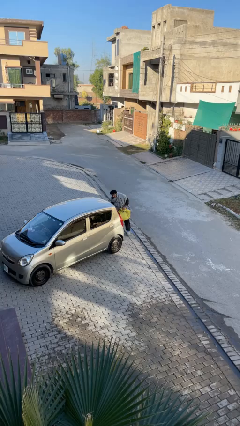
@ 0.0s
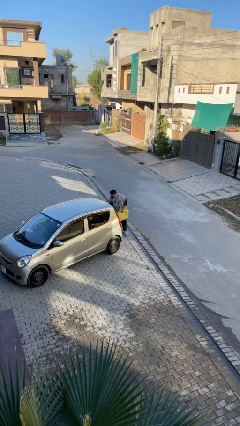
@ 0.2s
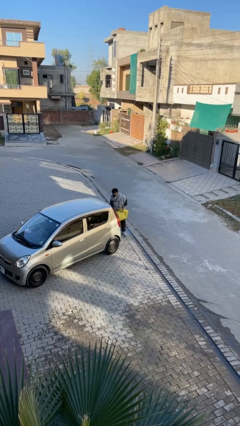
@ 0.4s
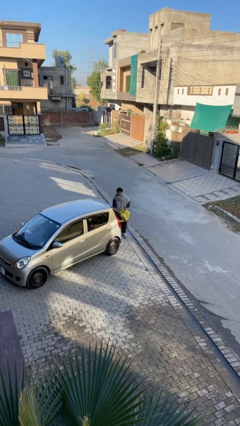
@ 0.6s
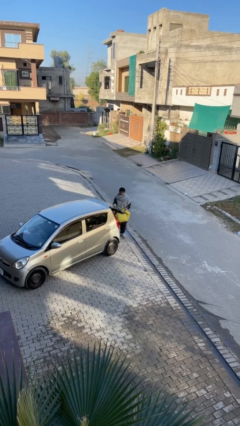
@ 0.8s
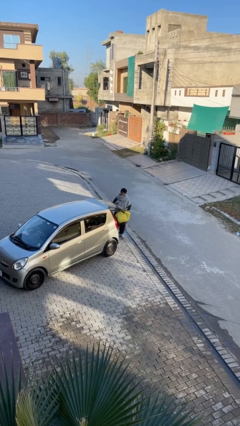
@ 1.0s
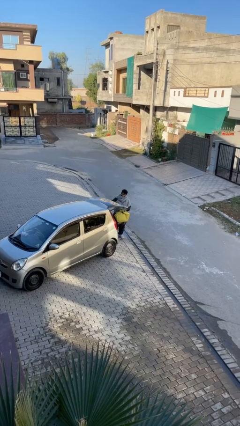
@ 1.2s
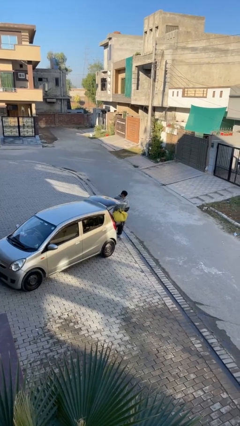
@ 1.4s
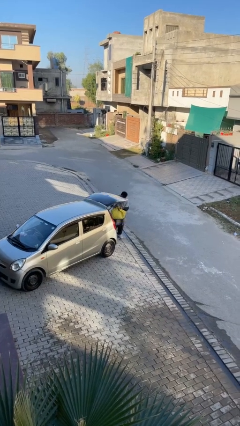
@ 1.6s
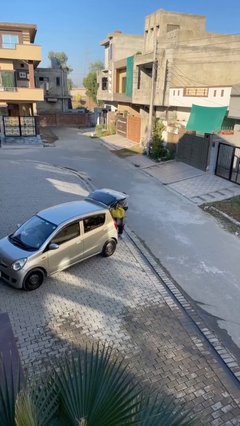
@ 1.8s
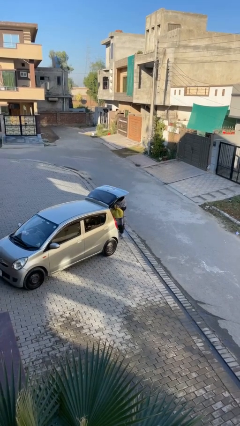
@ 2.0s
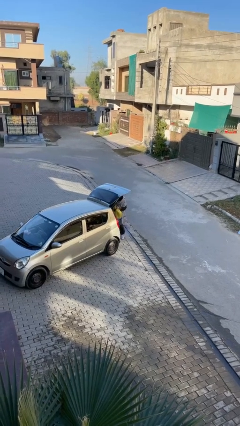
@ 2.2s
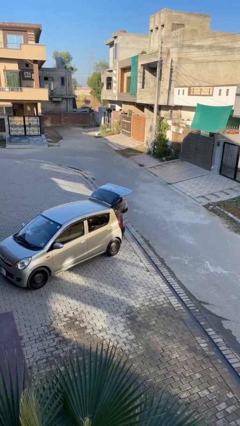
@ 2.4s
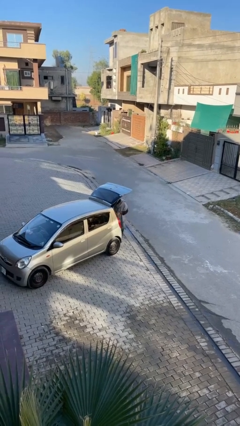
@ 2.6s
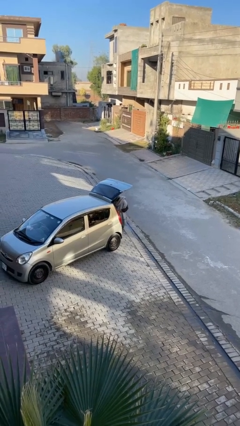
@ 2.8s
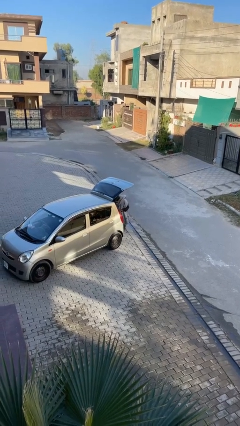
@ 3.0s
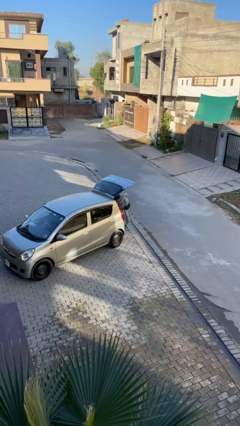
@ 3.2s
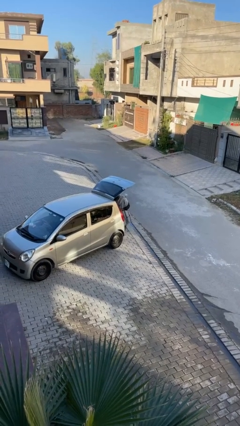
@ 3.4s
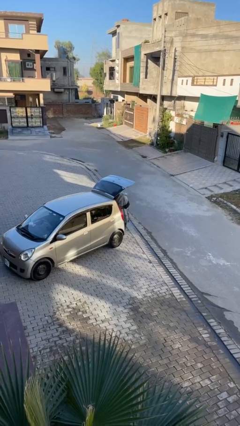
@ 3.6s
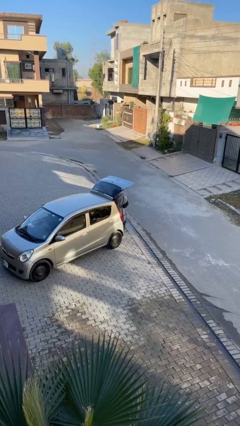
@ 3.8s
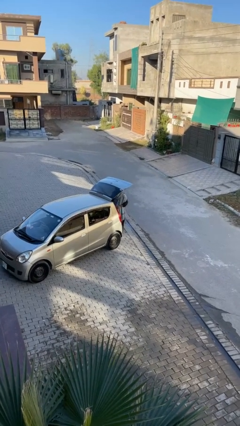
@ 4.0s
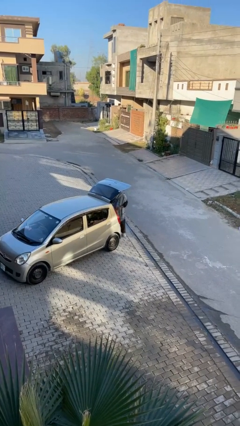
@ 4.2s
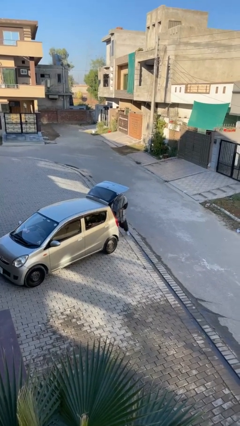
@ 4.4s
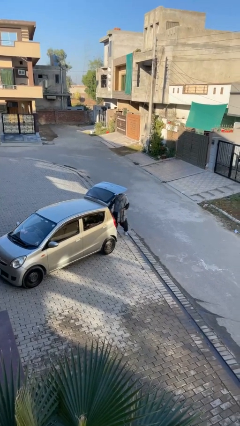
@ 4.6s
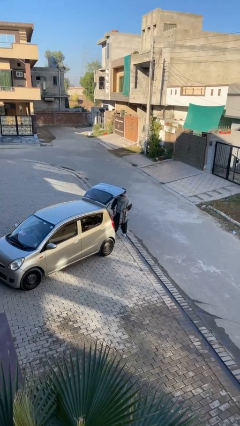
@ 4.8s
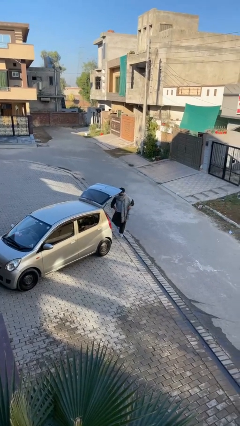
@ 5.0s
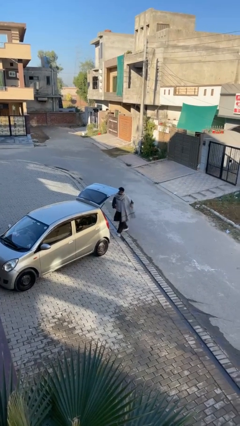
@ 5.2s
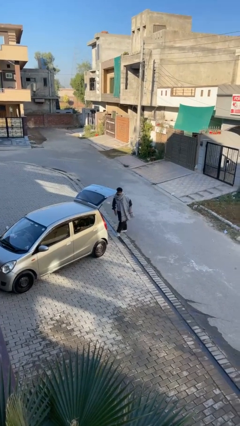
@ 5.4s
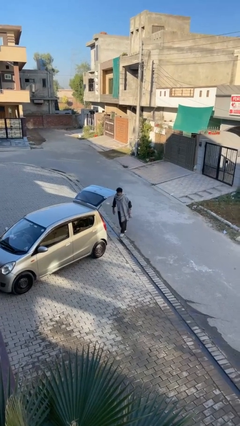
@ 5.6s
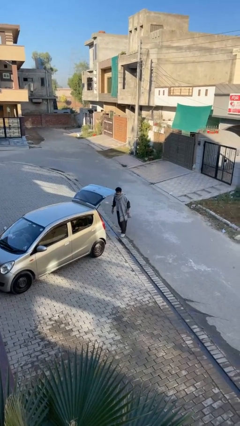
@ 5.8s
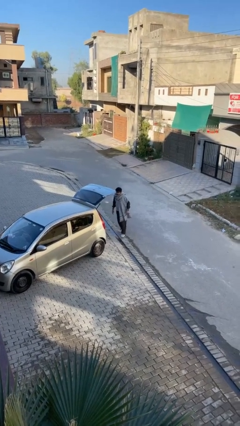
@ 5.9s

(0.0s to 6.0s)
person loads car

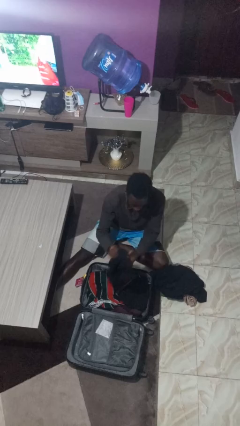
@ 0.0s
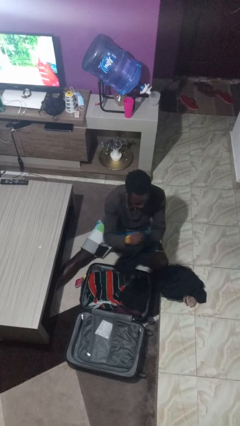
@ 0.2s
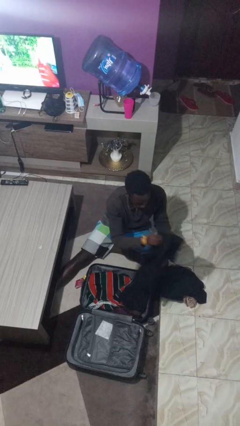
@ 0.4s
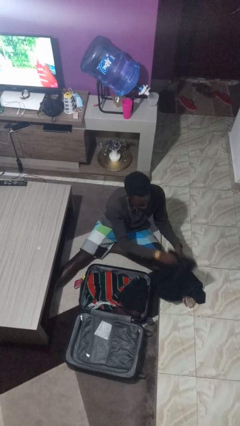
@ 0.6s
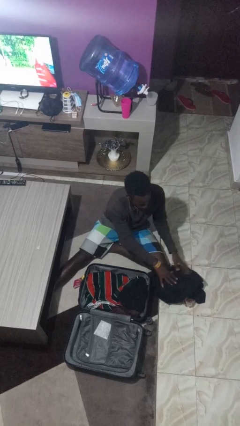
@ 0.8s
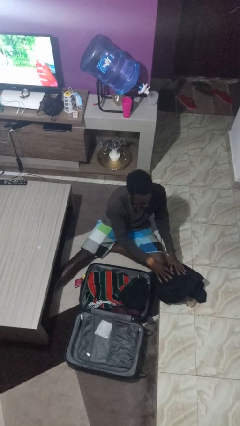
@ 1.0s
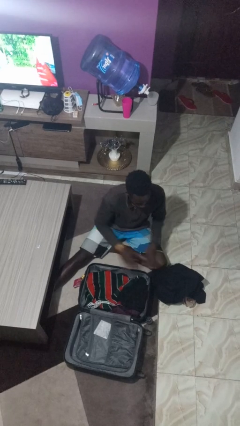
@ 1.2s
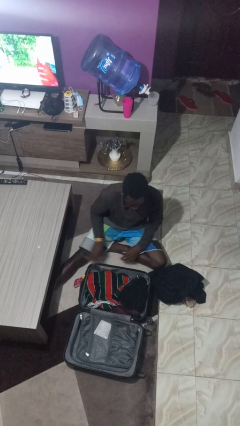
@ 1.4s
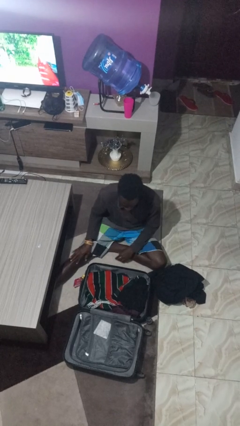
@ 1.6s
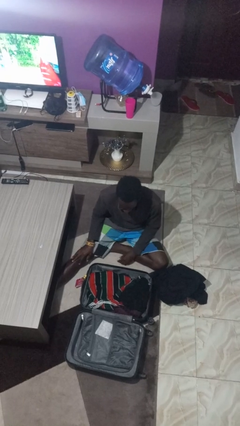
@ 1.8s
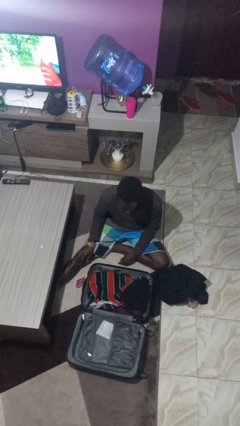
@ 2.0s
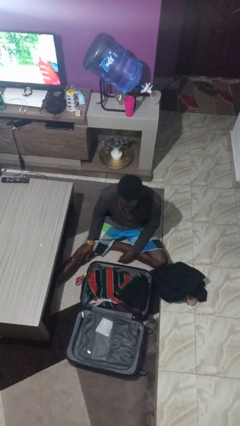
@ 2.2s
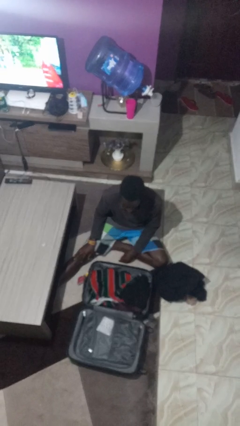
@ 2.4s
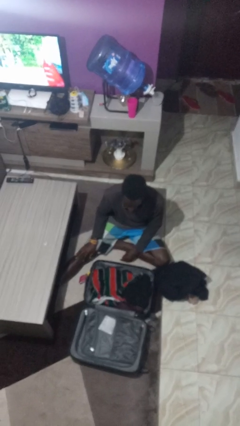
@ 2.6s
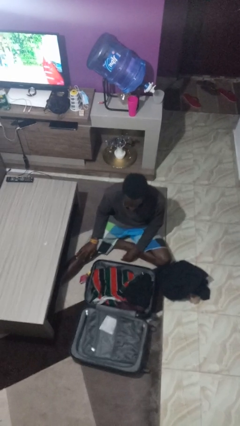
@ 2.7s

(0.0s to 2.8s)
person unloads clothes from suitcase

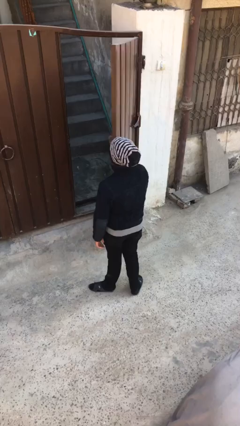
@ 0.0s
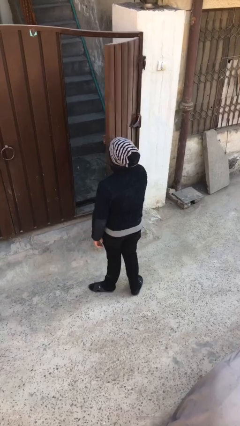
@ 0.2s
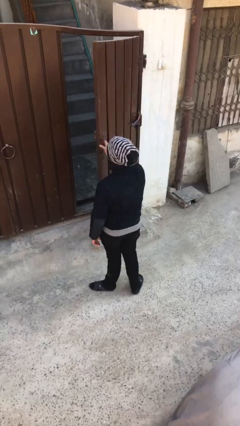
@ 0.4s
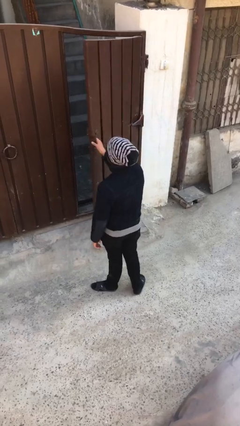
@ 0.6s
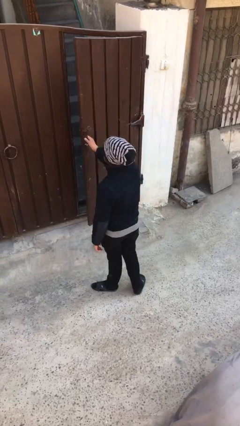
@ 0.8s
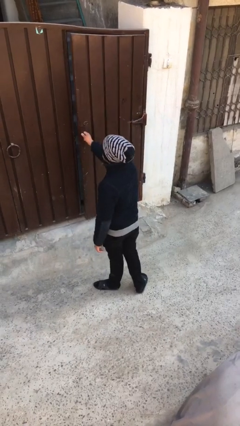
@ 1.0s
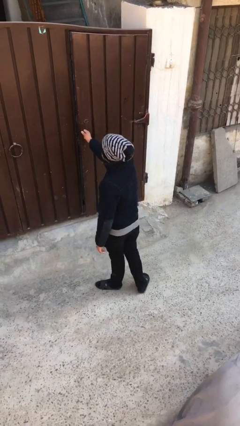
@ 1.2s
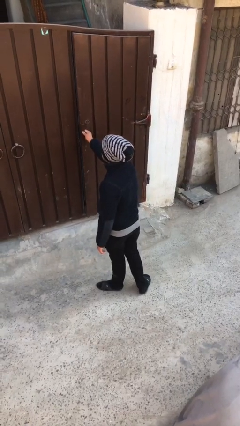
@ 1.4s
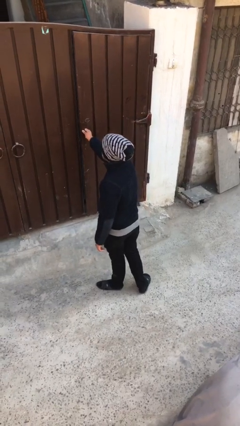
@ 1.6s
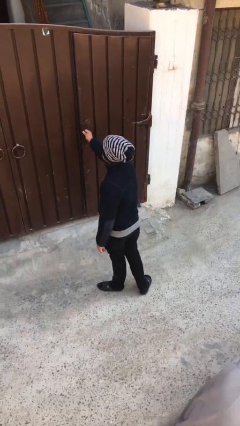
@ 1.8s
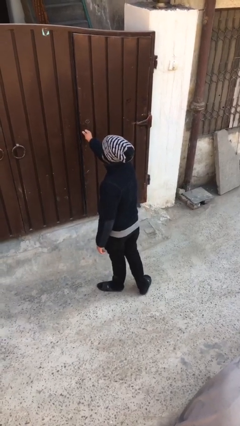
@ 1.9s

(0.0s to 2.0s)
person closes facility door

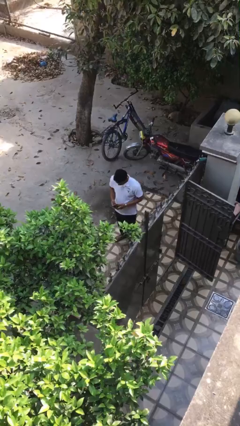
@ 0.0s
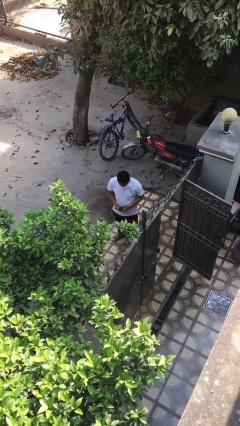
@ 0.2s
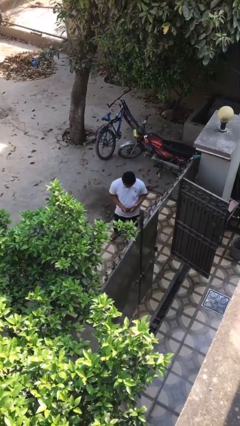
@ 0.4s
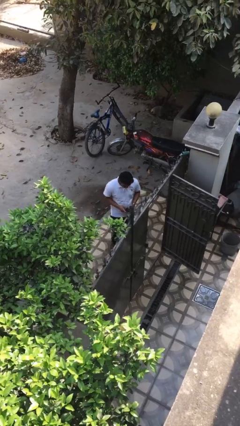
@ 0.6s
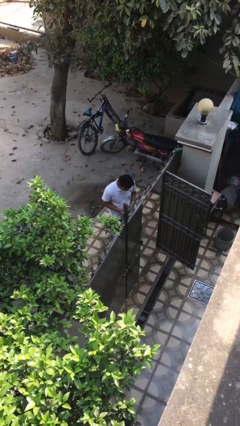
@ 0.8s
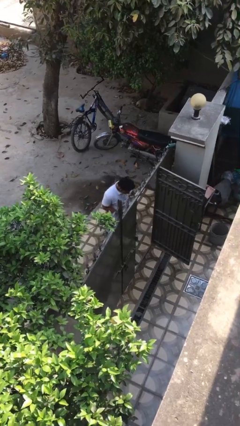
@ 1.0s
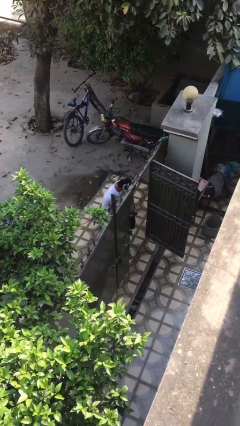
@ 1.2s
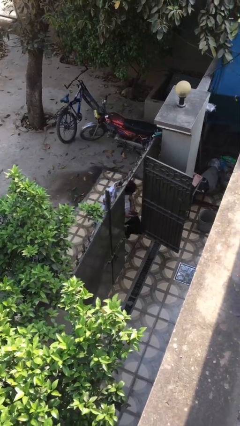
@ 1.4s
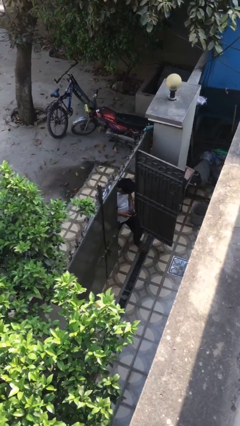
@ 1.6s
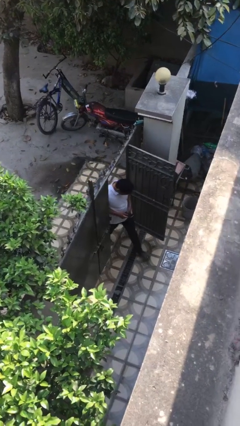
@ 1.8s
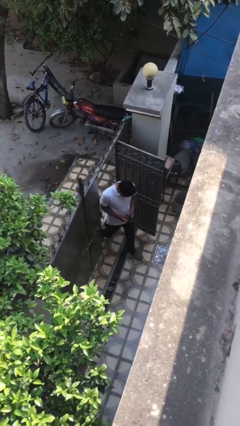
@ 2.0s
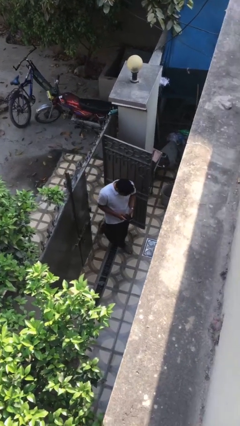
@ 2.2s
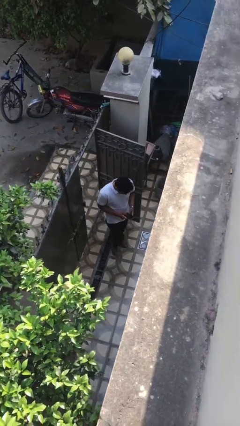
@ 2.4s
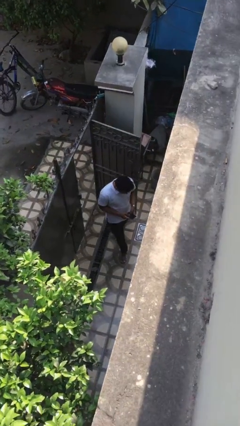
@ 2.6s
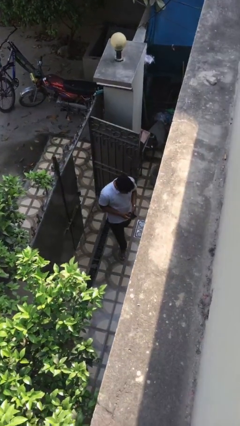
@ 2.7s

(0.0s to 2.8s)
person enters scene through structure

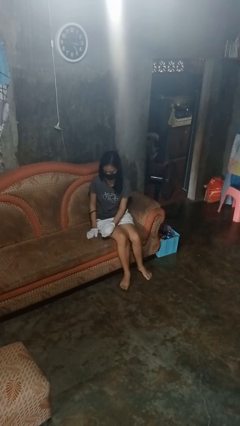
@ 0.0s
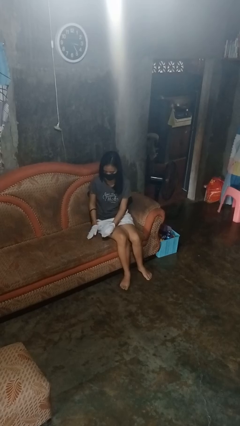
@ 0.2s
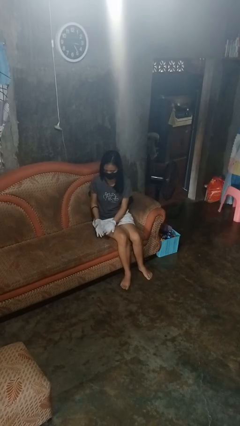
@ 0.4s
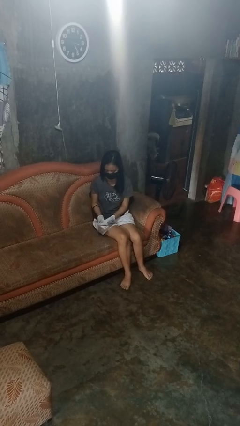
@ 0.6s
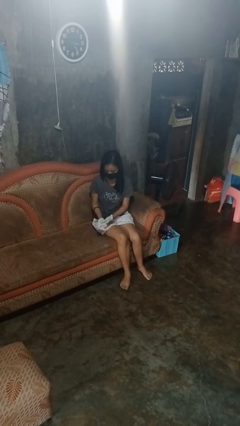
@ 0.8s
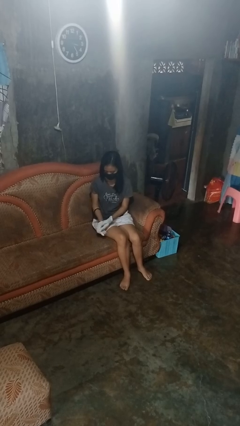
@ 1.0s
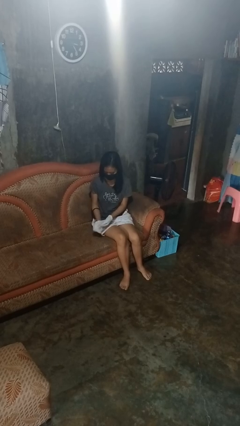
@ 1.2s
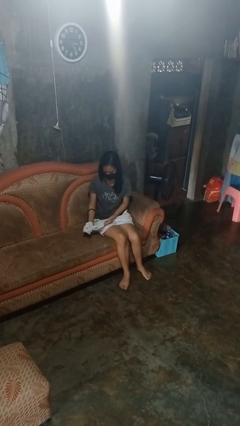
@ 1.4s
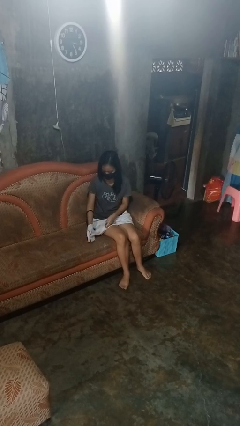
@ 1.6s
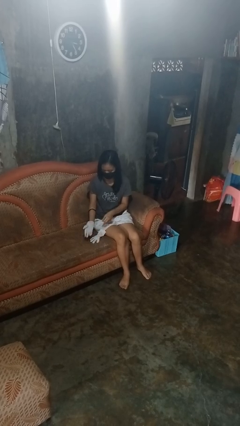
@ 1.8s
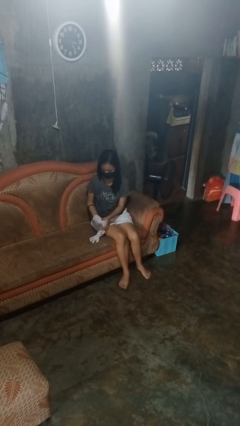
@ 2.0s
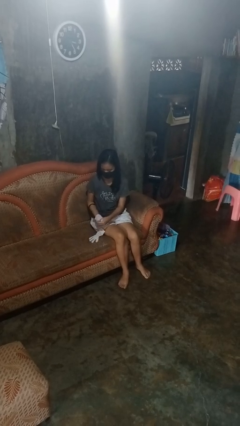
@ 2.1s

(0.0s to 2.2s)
person takes off gloves

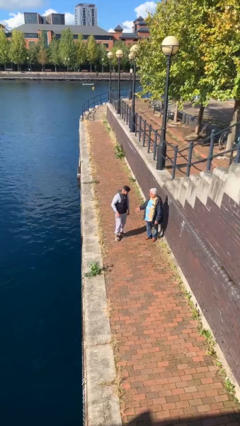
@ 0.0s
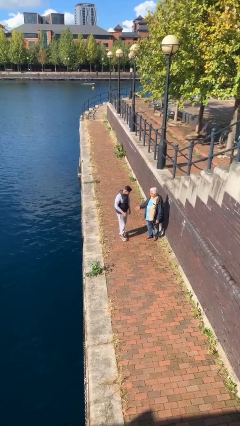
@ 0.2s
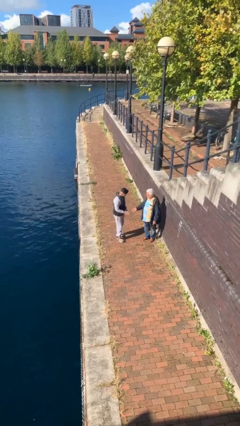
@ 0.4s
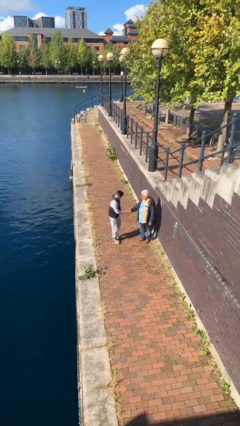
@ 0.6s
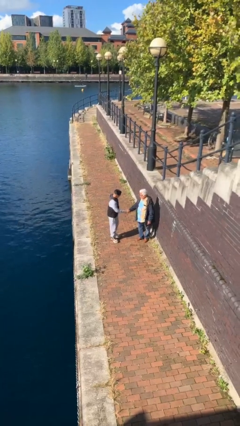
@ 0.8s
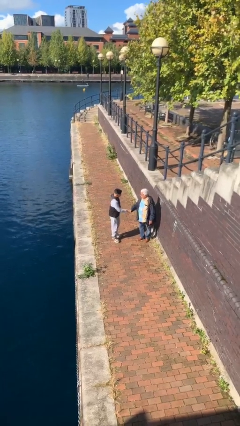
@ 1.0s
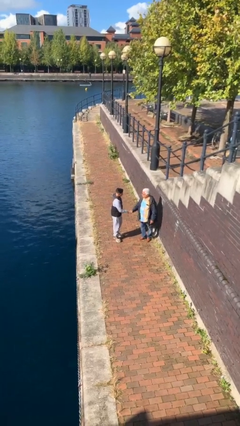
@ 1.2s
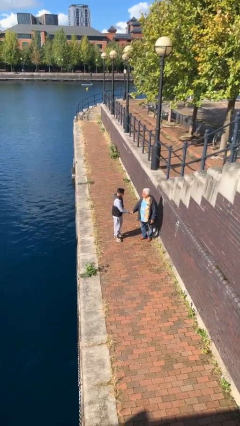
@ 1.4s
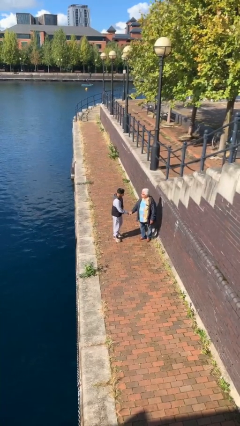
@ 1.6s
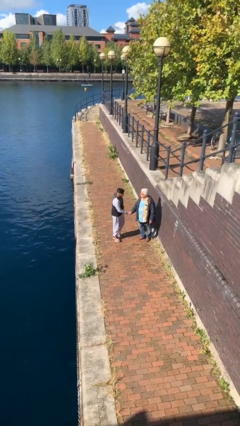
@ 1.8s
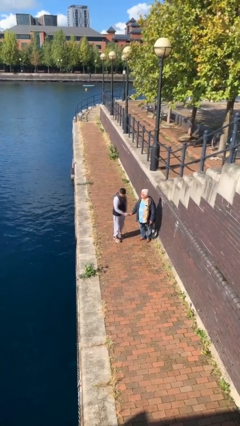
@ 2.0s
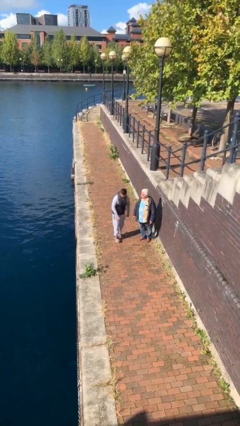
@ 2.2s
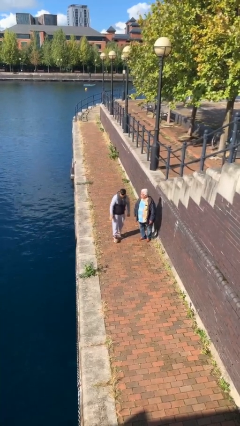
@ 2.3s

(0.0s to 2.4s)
person shakes hand
